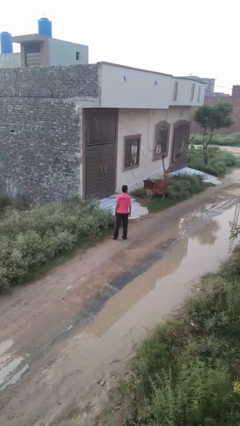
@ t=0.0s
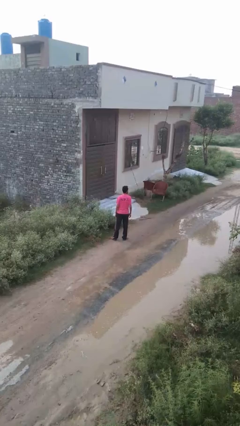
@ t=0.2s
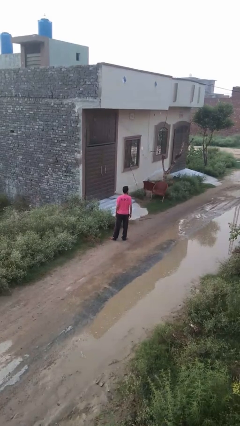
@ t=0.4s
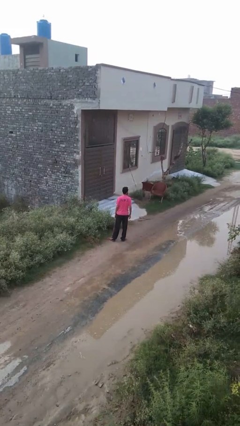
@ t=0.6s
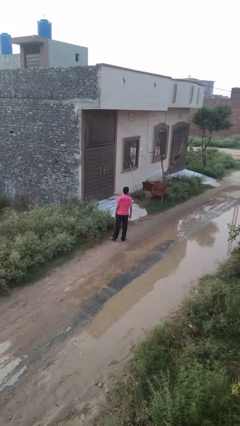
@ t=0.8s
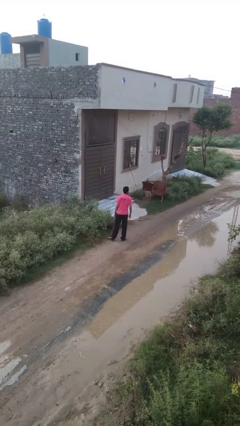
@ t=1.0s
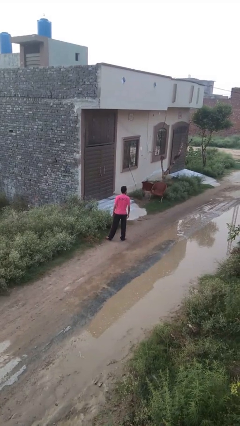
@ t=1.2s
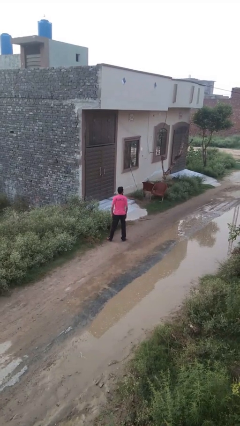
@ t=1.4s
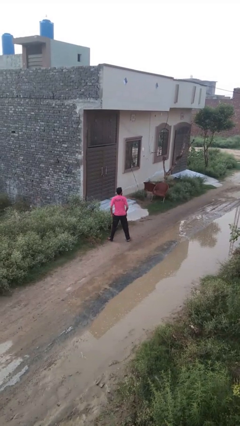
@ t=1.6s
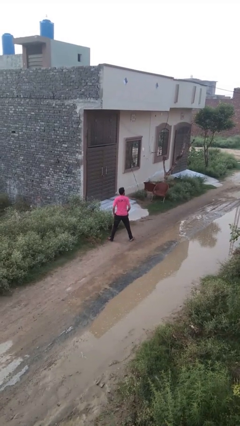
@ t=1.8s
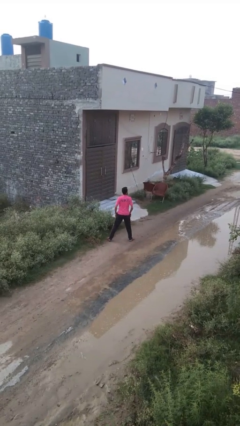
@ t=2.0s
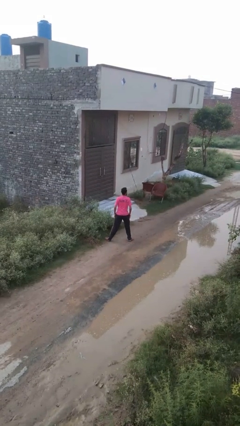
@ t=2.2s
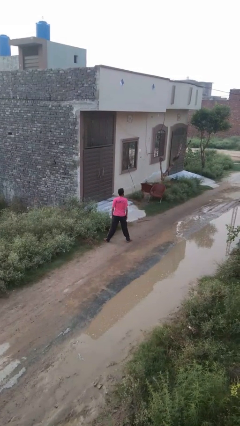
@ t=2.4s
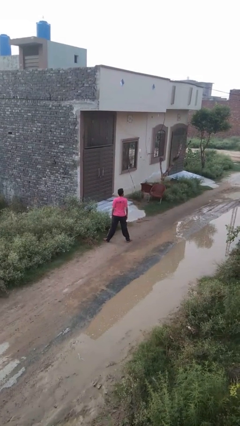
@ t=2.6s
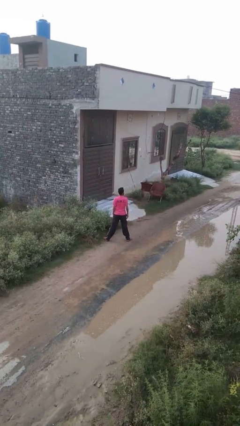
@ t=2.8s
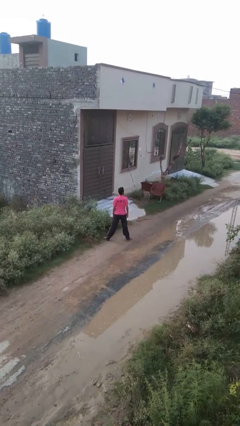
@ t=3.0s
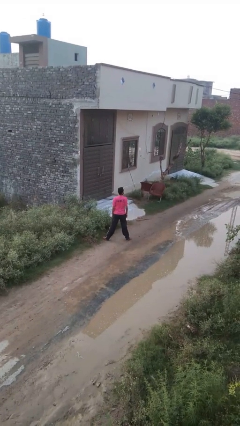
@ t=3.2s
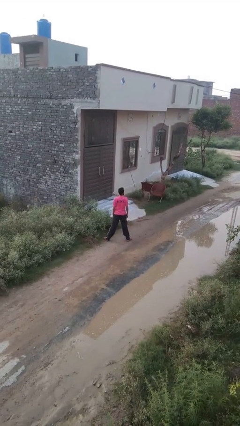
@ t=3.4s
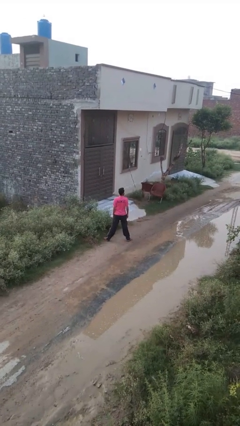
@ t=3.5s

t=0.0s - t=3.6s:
person stretches back

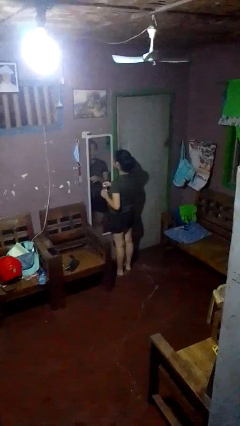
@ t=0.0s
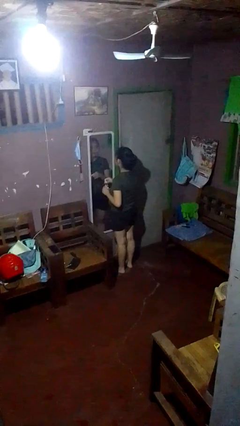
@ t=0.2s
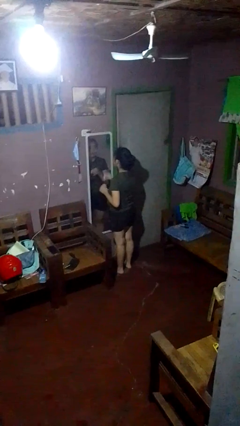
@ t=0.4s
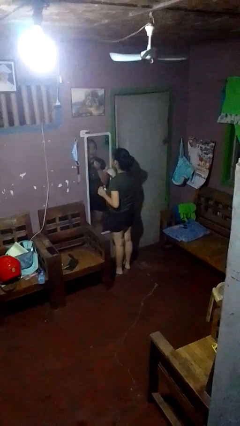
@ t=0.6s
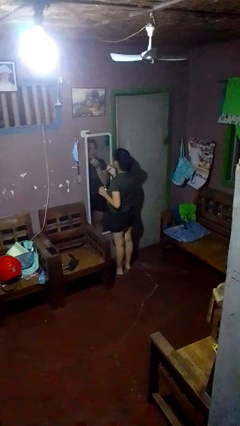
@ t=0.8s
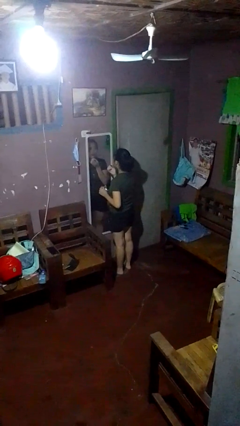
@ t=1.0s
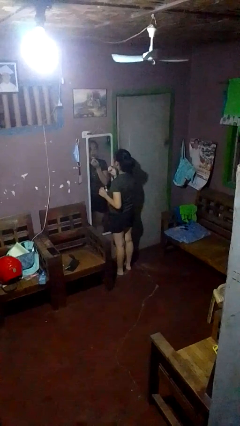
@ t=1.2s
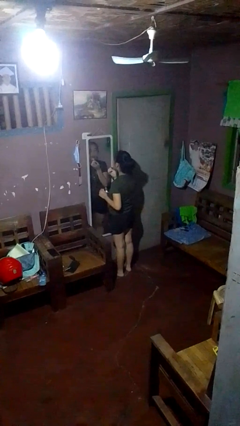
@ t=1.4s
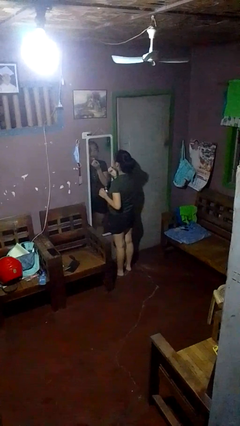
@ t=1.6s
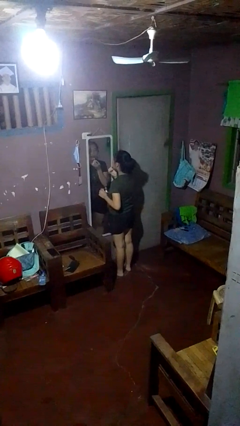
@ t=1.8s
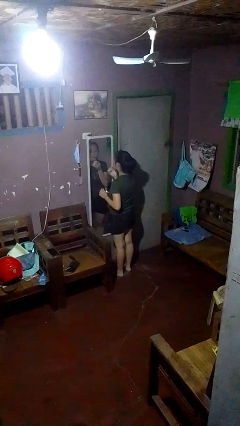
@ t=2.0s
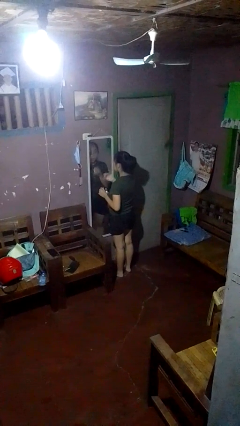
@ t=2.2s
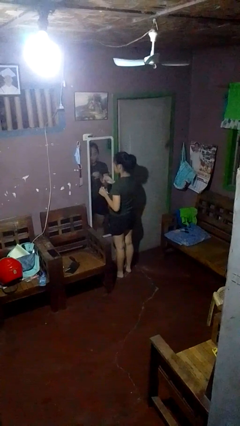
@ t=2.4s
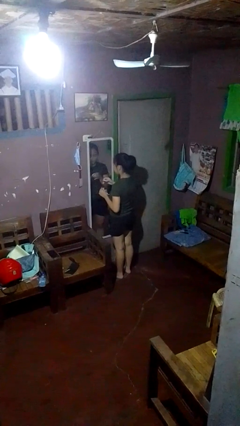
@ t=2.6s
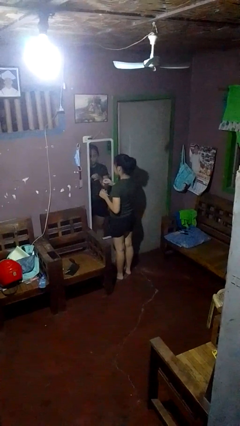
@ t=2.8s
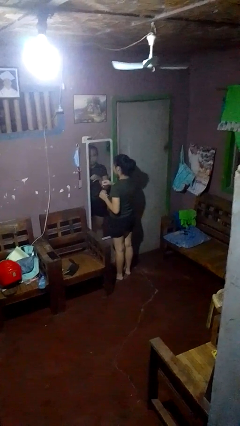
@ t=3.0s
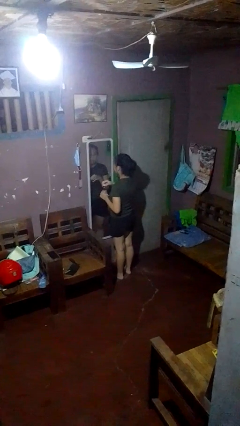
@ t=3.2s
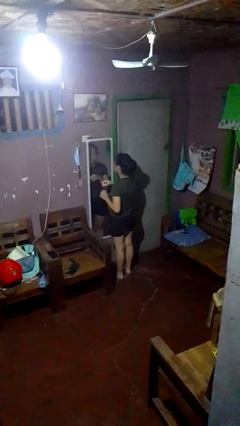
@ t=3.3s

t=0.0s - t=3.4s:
person applies lip makeup

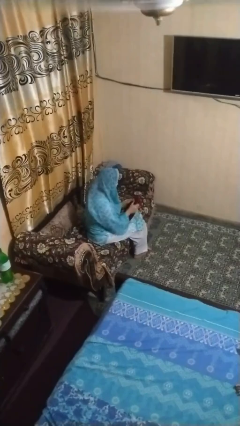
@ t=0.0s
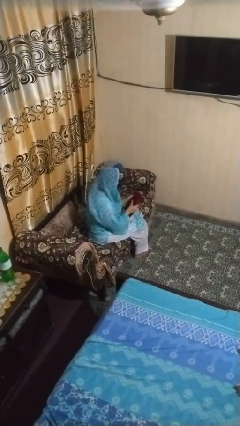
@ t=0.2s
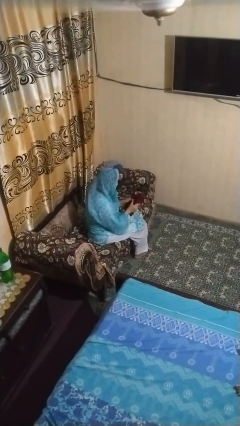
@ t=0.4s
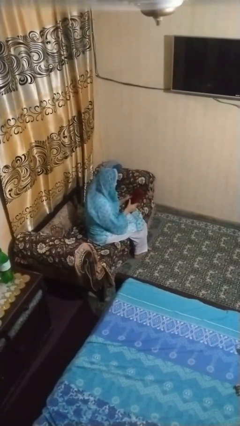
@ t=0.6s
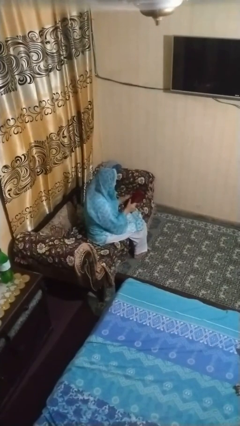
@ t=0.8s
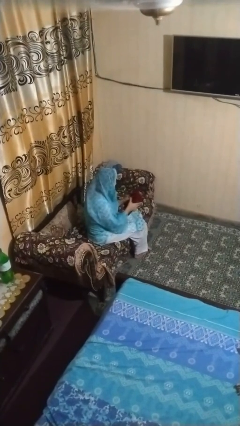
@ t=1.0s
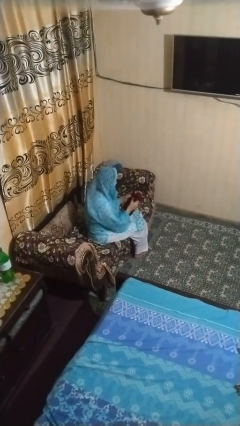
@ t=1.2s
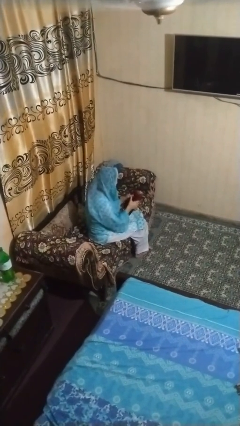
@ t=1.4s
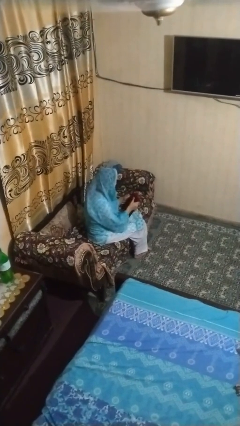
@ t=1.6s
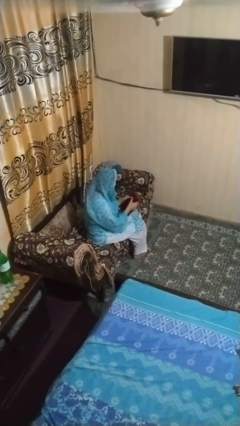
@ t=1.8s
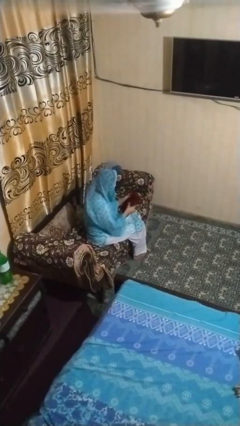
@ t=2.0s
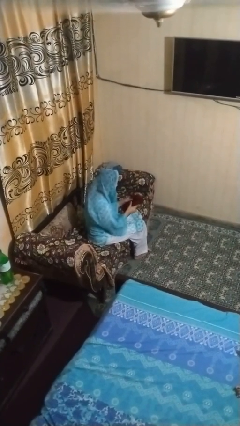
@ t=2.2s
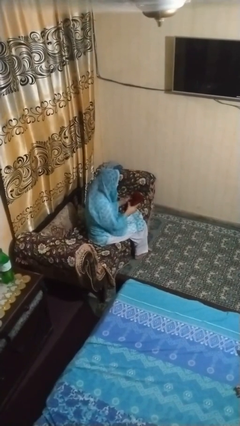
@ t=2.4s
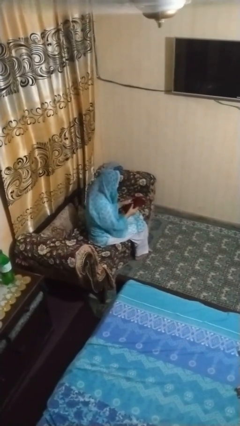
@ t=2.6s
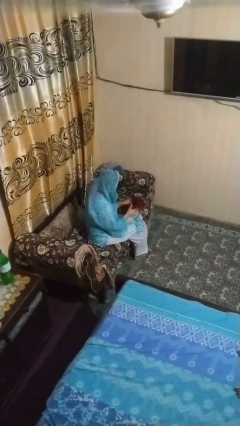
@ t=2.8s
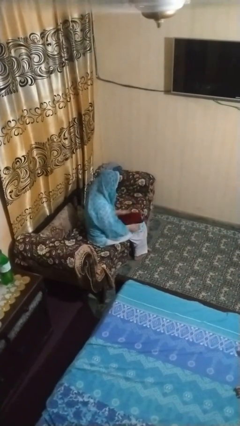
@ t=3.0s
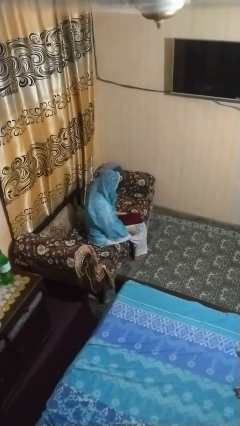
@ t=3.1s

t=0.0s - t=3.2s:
person squeezes object

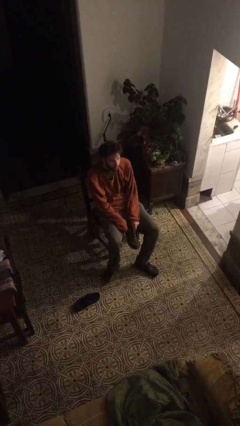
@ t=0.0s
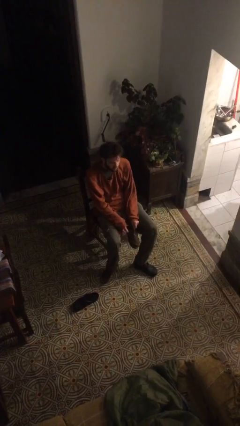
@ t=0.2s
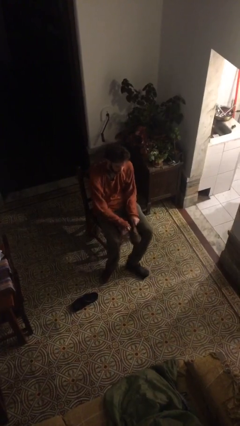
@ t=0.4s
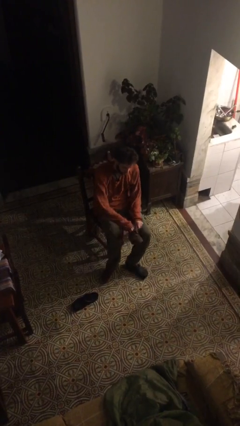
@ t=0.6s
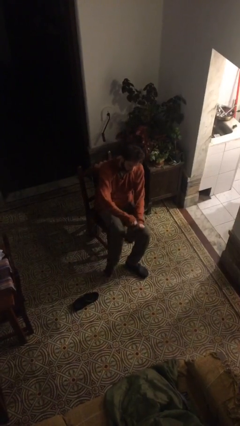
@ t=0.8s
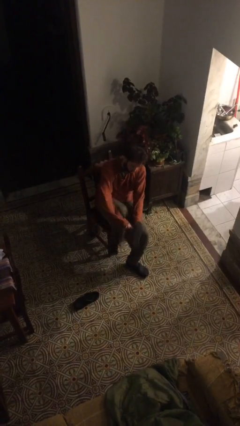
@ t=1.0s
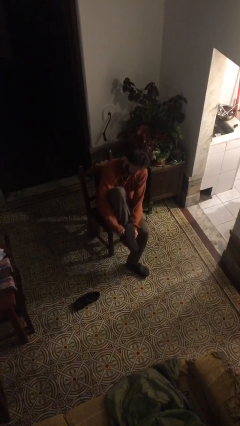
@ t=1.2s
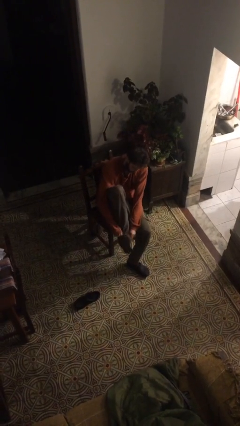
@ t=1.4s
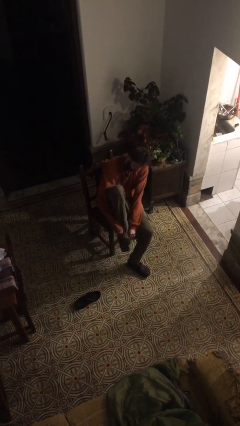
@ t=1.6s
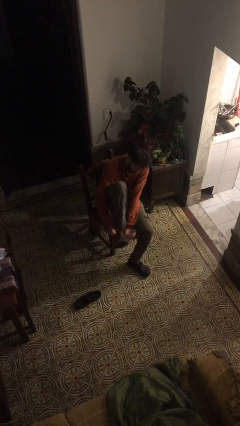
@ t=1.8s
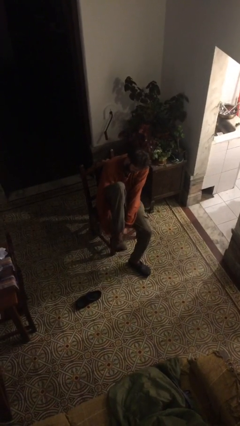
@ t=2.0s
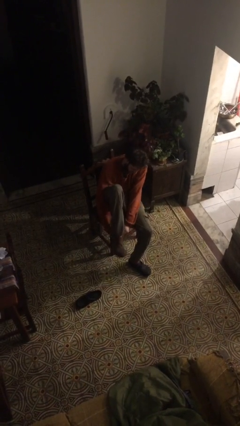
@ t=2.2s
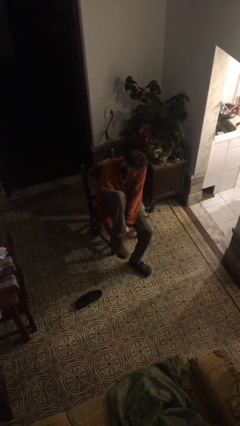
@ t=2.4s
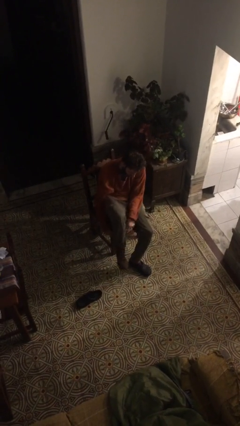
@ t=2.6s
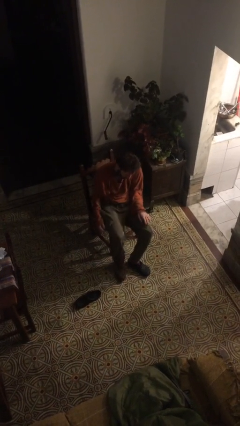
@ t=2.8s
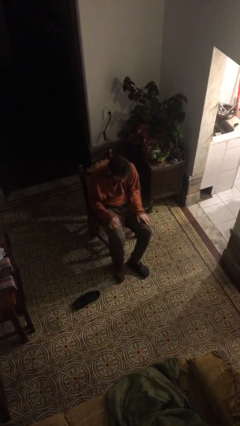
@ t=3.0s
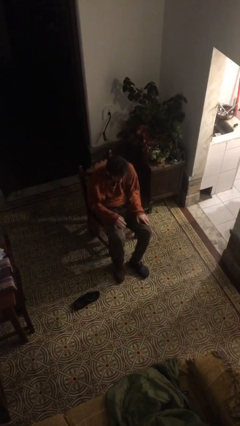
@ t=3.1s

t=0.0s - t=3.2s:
person puts on boots

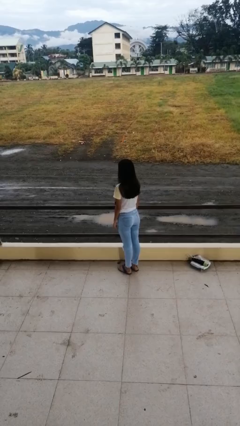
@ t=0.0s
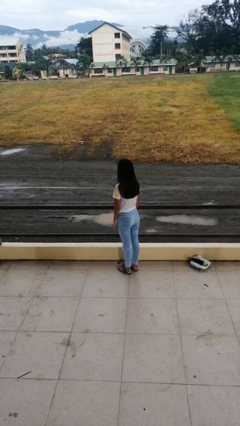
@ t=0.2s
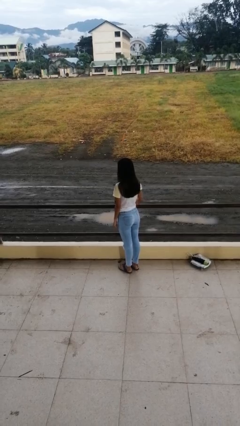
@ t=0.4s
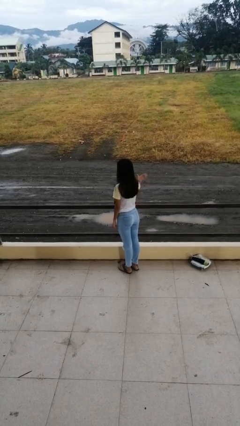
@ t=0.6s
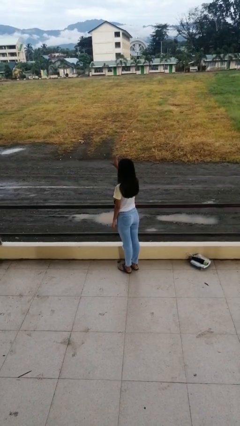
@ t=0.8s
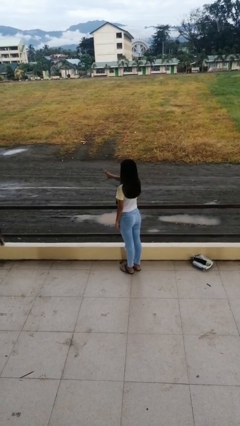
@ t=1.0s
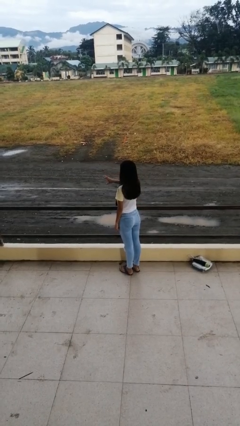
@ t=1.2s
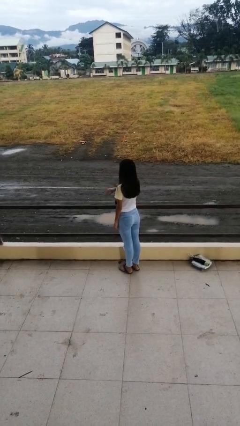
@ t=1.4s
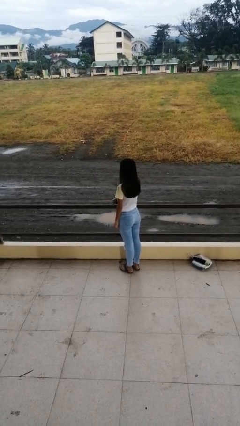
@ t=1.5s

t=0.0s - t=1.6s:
person gestures swipe left

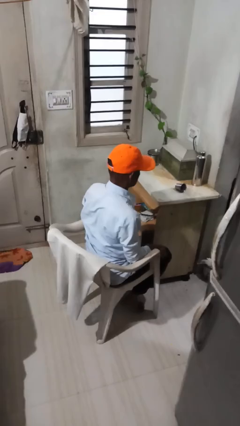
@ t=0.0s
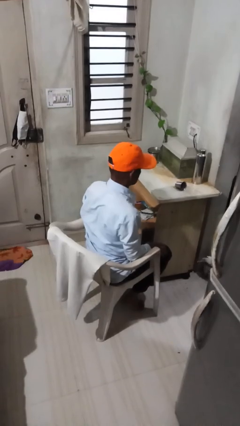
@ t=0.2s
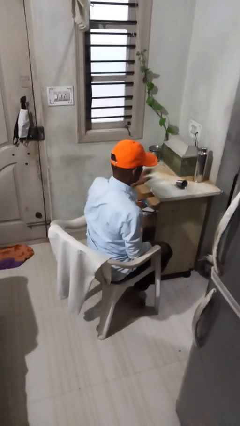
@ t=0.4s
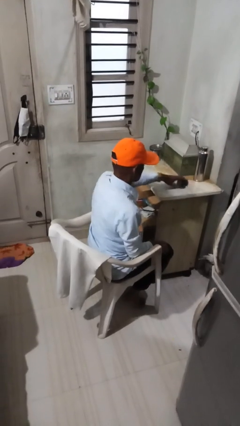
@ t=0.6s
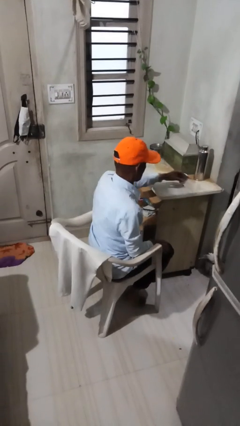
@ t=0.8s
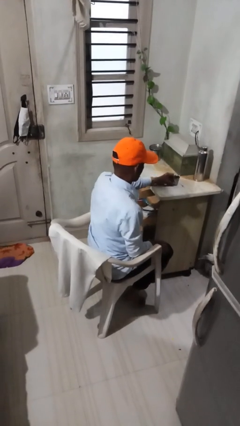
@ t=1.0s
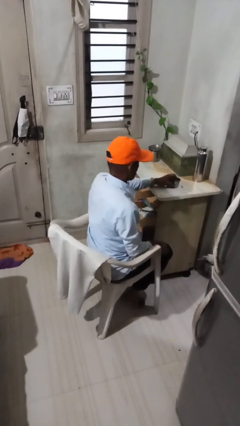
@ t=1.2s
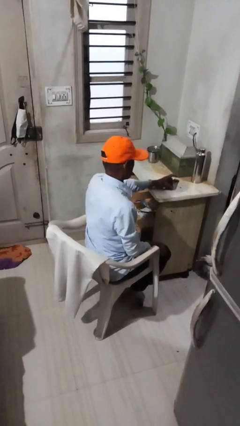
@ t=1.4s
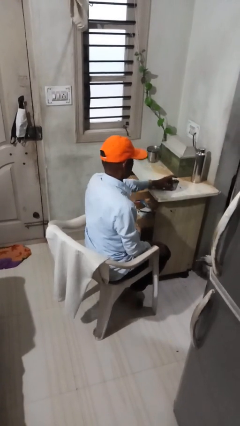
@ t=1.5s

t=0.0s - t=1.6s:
person sets upright glass

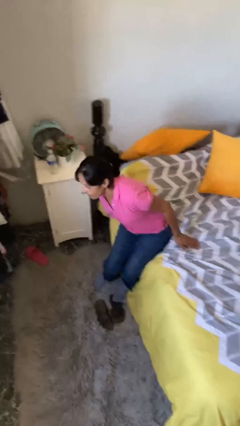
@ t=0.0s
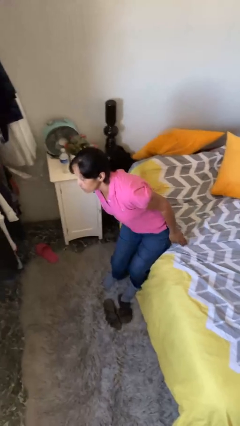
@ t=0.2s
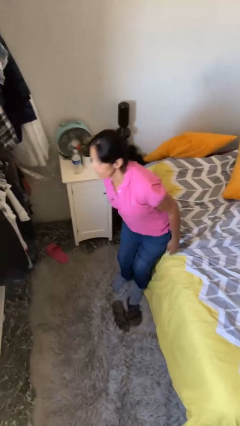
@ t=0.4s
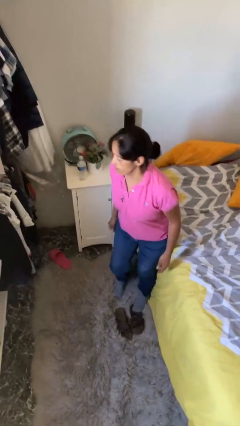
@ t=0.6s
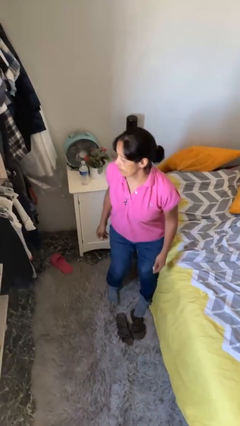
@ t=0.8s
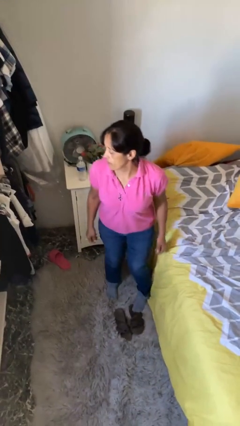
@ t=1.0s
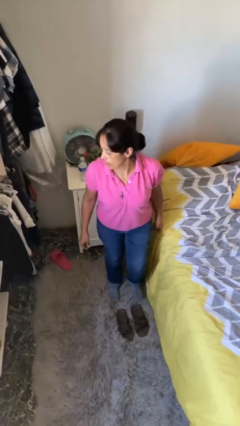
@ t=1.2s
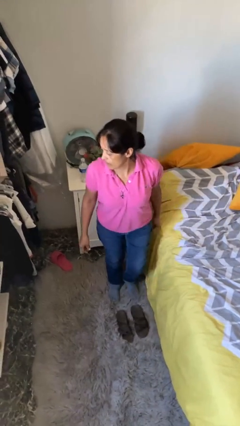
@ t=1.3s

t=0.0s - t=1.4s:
person stands up
